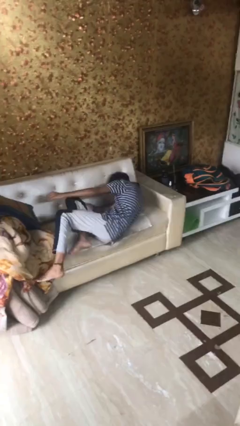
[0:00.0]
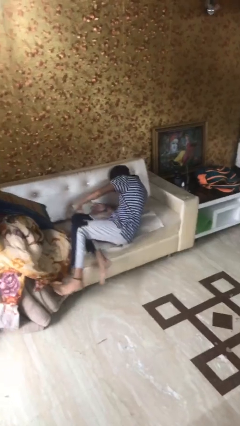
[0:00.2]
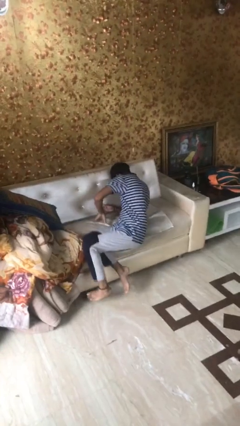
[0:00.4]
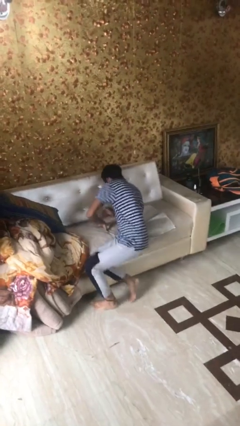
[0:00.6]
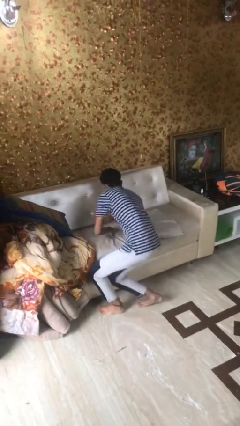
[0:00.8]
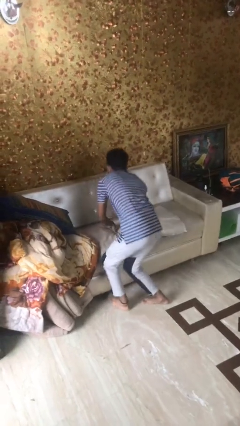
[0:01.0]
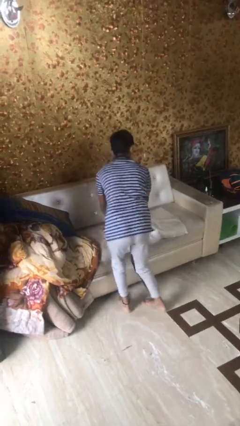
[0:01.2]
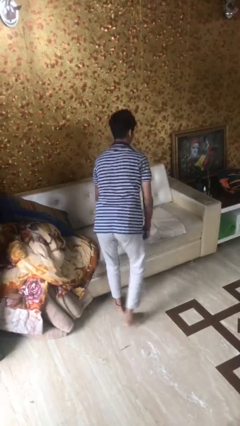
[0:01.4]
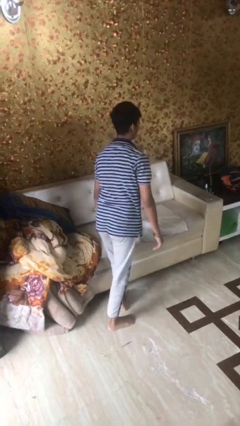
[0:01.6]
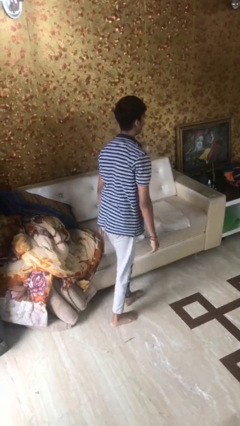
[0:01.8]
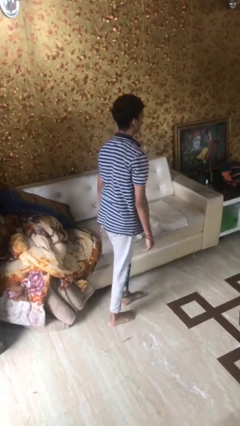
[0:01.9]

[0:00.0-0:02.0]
person stands up

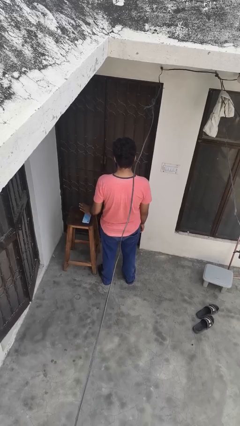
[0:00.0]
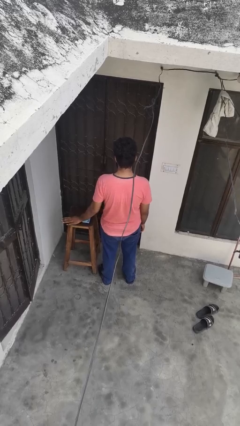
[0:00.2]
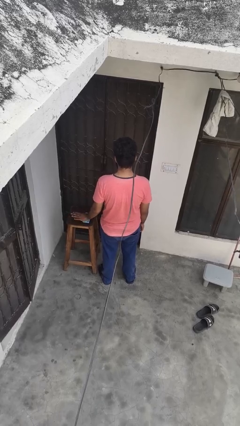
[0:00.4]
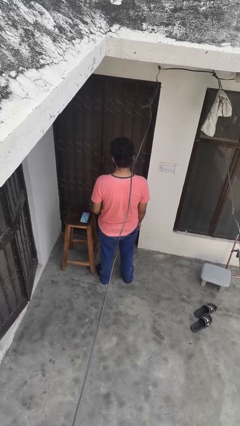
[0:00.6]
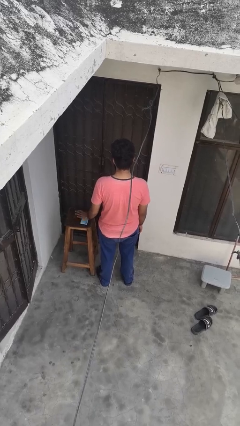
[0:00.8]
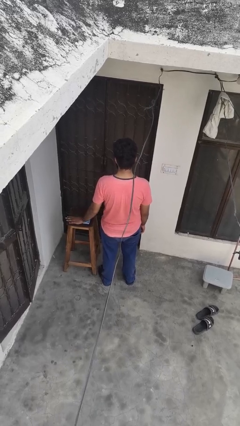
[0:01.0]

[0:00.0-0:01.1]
person waves hand over object

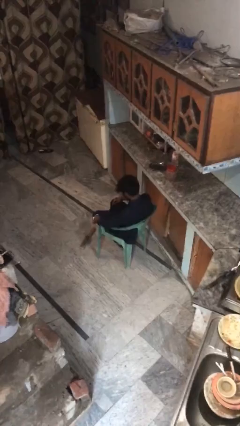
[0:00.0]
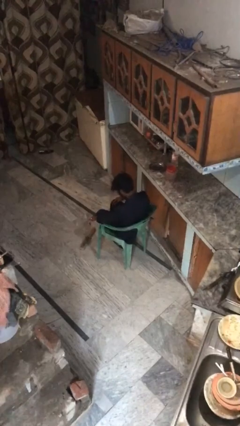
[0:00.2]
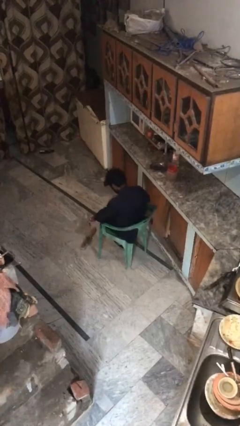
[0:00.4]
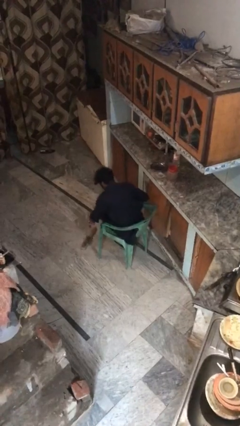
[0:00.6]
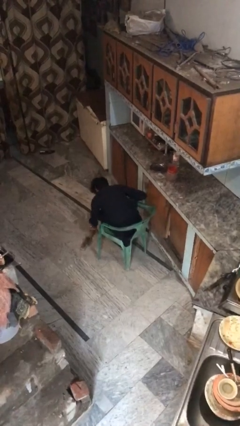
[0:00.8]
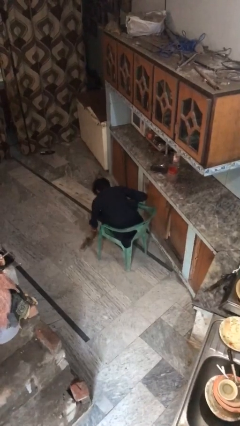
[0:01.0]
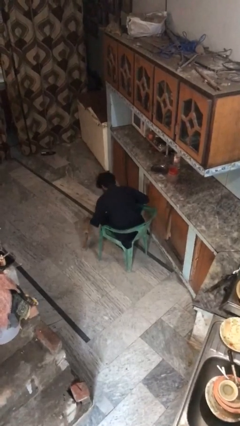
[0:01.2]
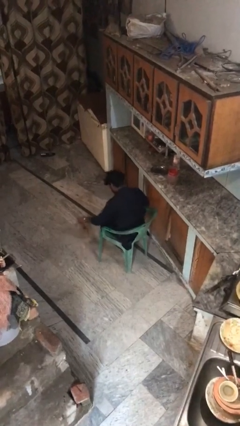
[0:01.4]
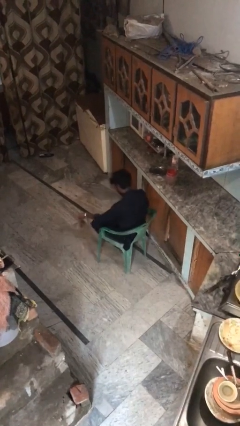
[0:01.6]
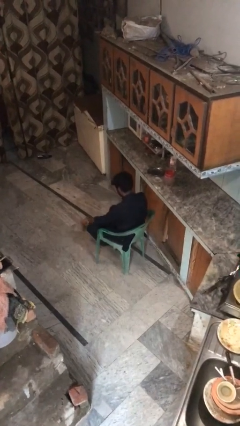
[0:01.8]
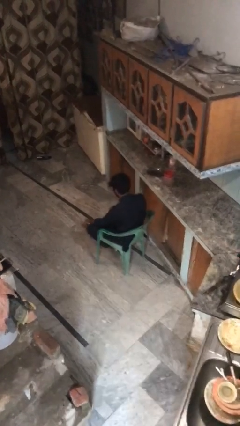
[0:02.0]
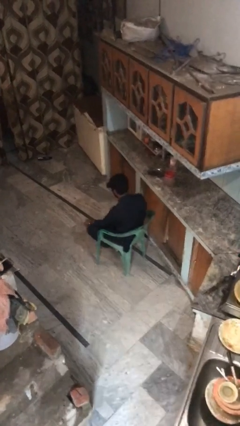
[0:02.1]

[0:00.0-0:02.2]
person picks up object from floor

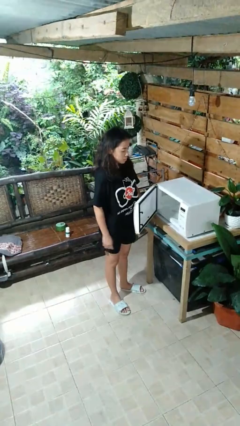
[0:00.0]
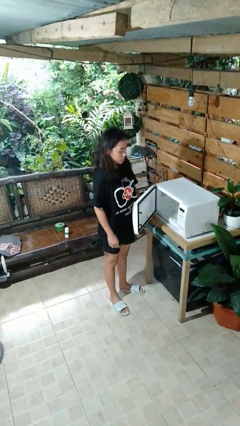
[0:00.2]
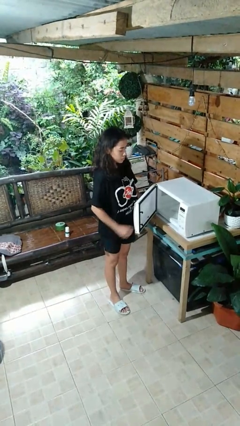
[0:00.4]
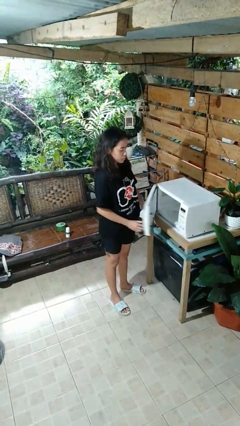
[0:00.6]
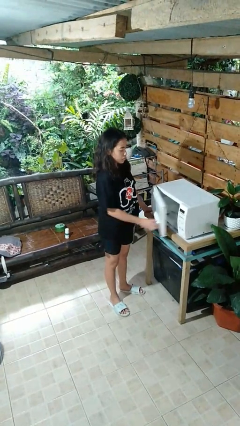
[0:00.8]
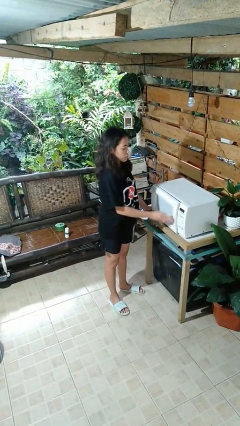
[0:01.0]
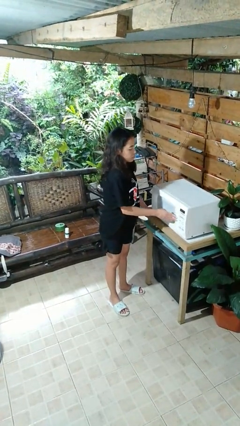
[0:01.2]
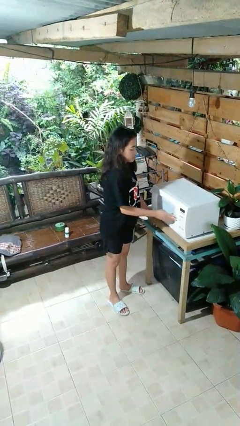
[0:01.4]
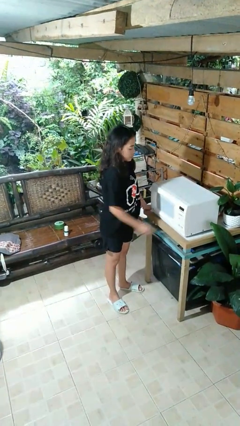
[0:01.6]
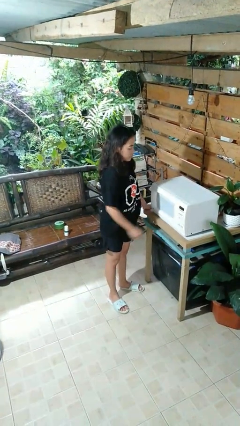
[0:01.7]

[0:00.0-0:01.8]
person closes microwave

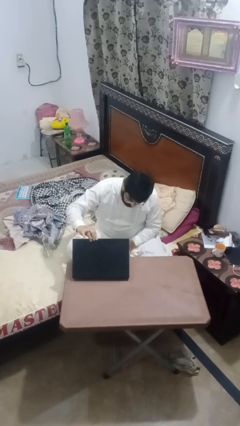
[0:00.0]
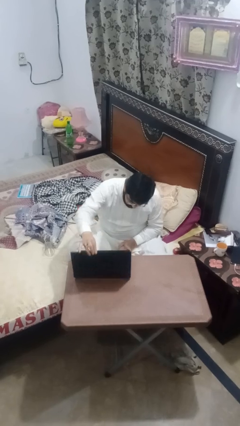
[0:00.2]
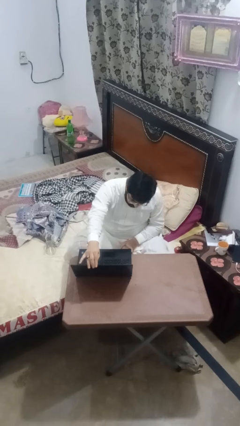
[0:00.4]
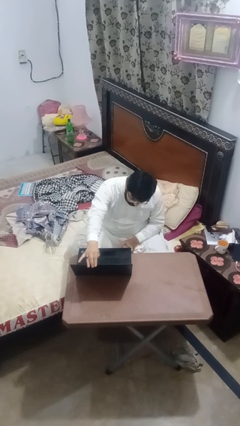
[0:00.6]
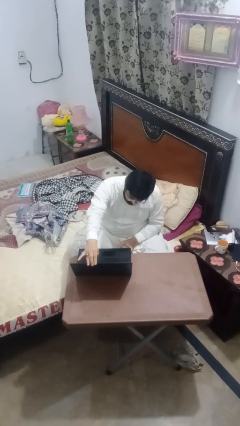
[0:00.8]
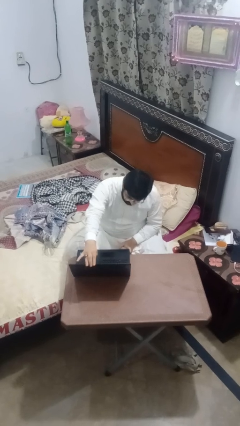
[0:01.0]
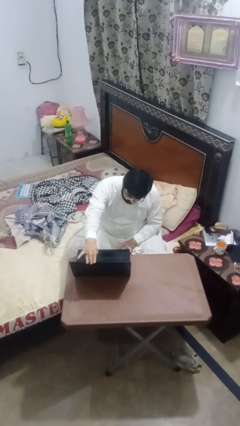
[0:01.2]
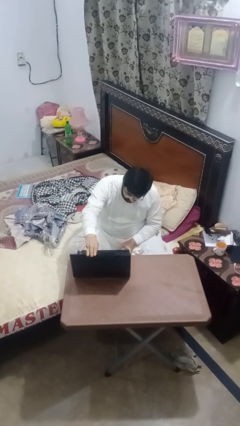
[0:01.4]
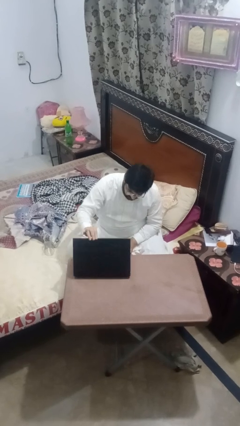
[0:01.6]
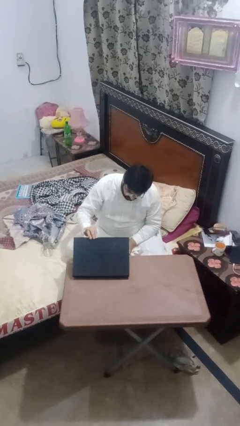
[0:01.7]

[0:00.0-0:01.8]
person opens laptop

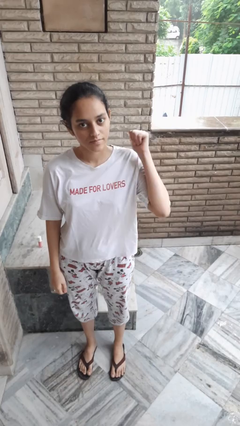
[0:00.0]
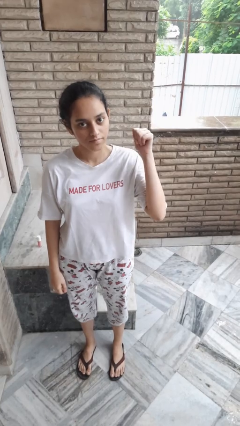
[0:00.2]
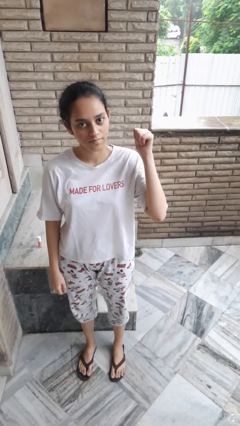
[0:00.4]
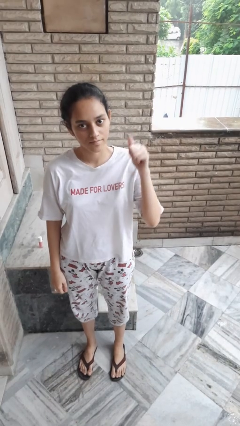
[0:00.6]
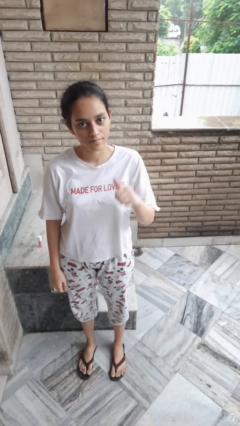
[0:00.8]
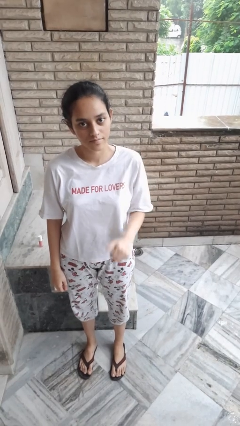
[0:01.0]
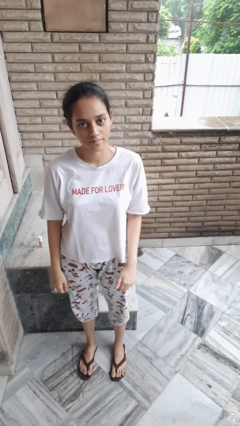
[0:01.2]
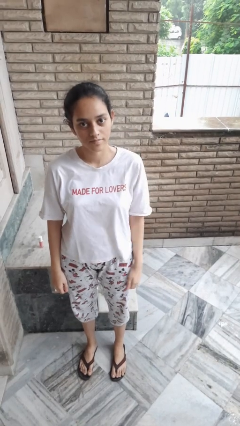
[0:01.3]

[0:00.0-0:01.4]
person gestures behind me

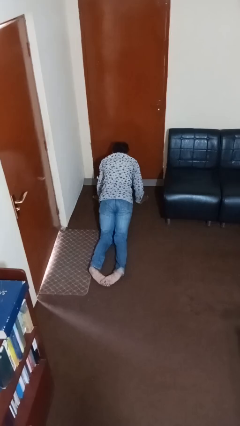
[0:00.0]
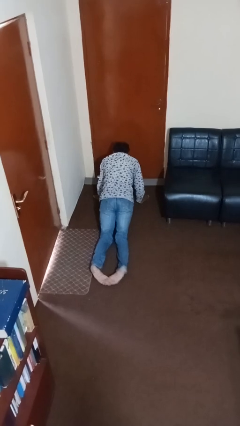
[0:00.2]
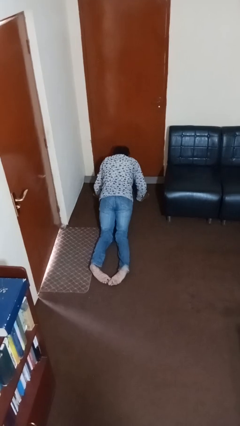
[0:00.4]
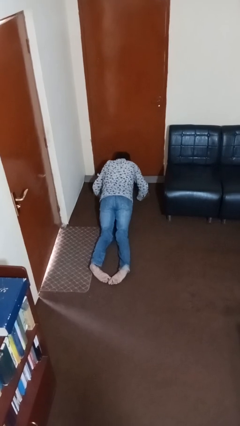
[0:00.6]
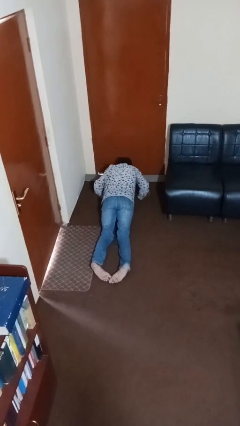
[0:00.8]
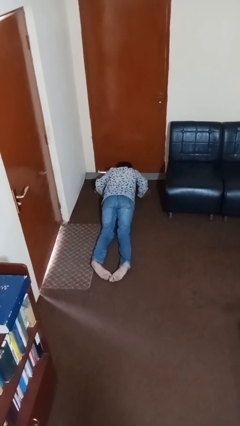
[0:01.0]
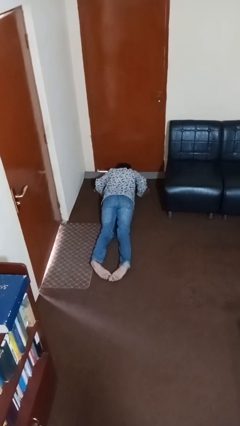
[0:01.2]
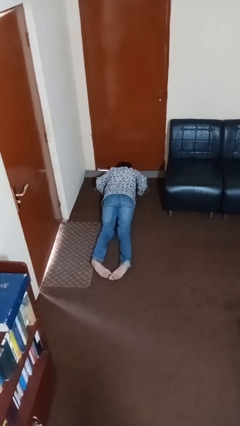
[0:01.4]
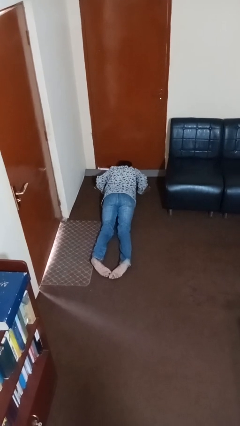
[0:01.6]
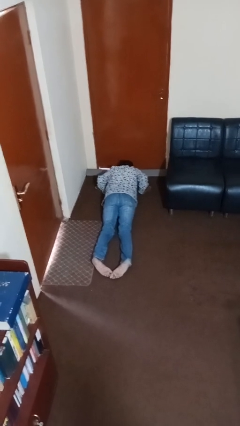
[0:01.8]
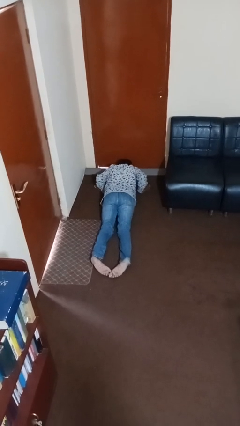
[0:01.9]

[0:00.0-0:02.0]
person exercises with pushup

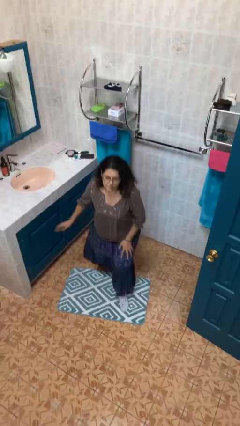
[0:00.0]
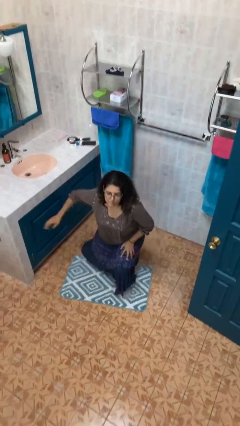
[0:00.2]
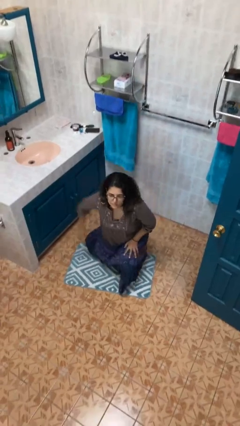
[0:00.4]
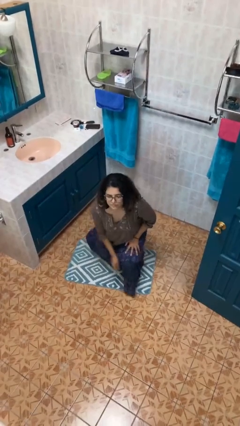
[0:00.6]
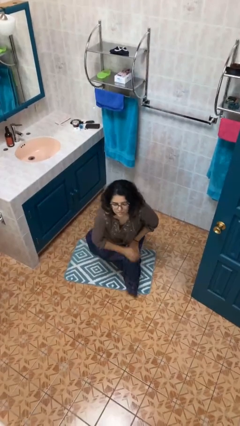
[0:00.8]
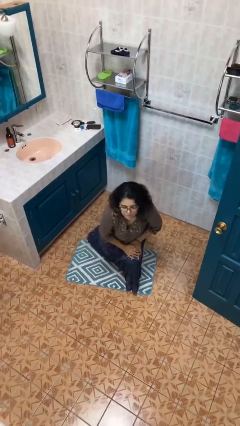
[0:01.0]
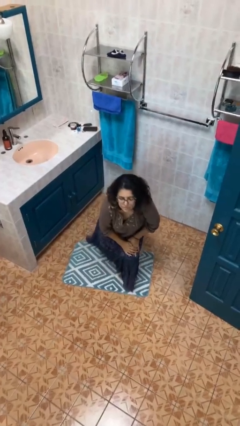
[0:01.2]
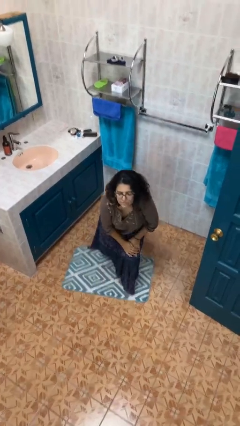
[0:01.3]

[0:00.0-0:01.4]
person kneels

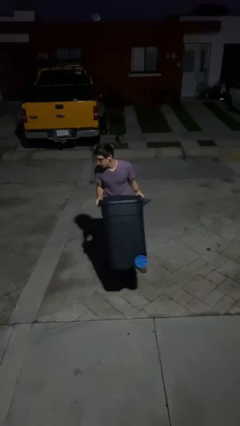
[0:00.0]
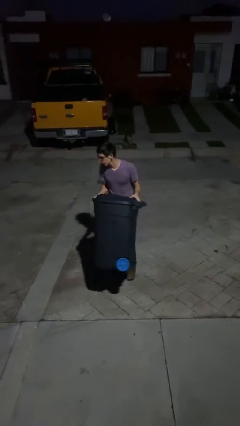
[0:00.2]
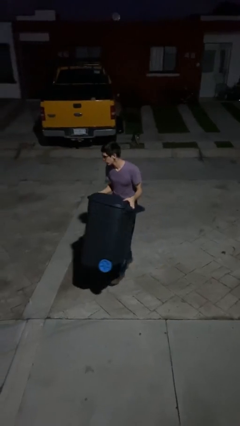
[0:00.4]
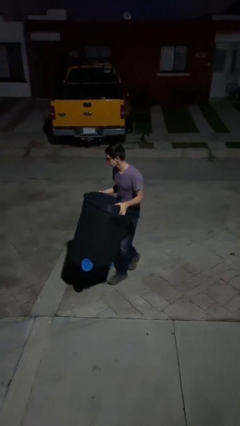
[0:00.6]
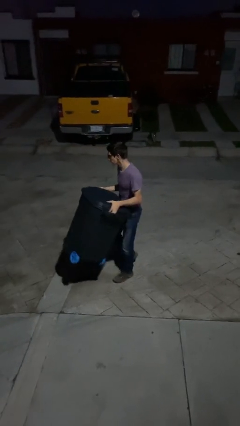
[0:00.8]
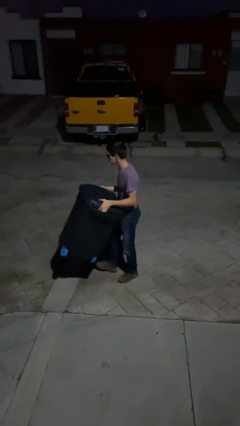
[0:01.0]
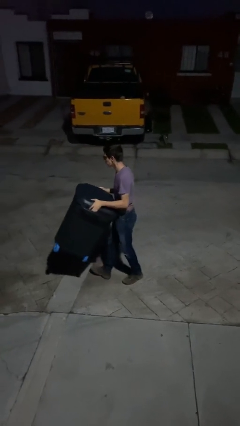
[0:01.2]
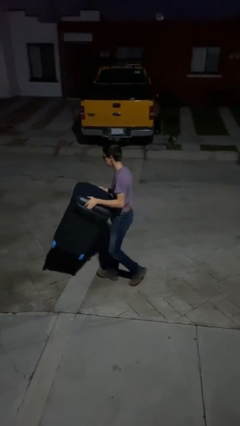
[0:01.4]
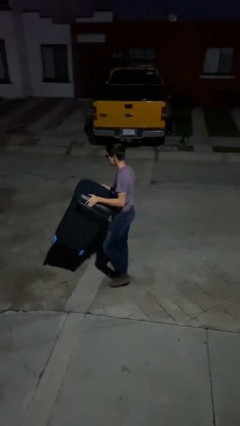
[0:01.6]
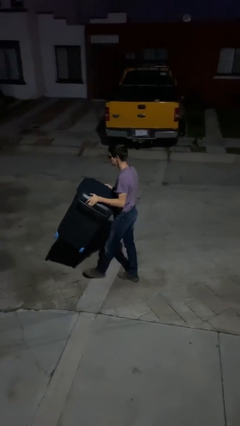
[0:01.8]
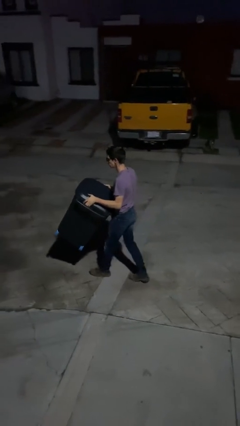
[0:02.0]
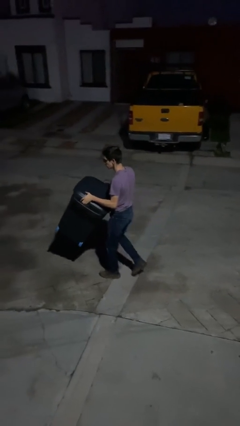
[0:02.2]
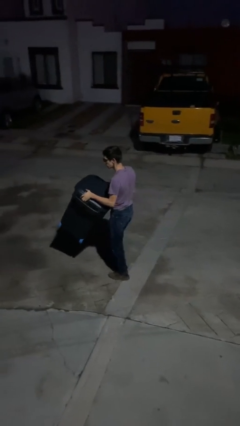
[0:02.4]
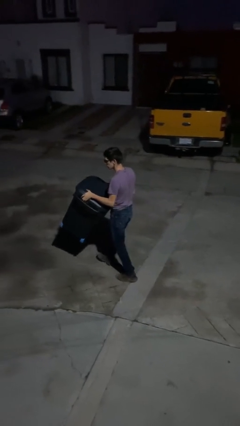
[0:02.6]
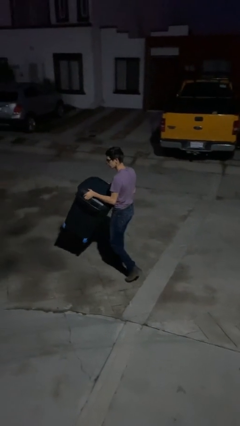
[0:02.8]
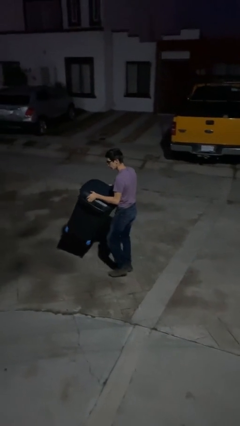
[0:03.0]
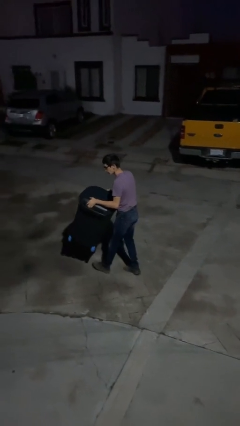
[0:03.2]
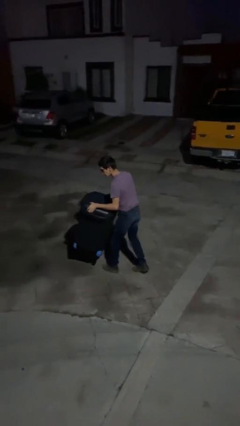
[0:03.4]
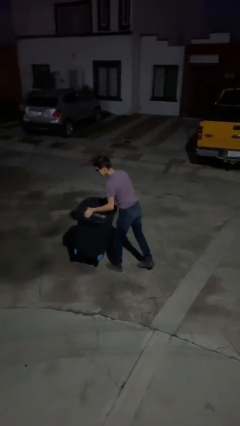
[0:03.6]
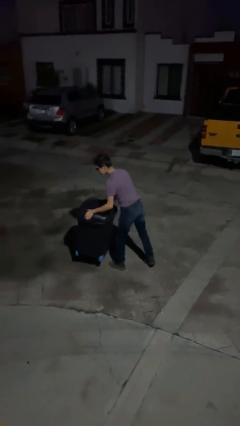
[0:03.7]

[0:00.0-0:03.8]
person carries heavy object
